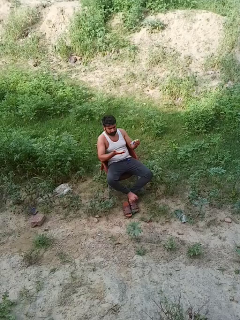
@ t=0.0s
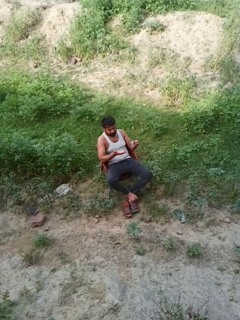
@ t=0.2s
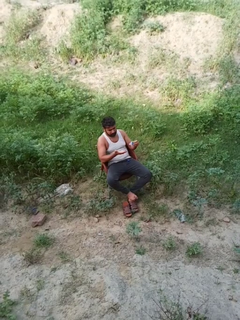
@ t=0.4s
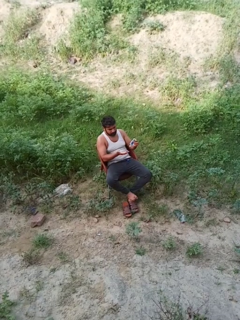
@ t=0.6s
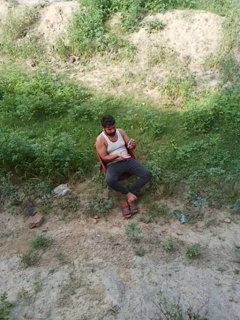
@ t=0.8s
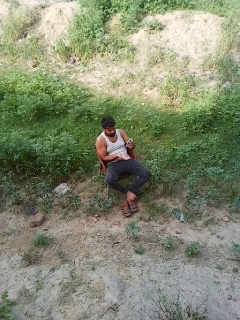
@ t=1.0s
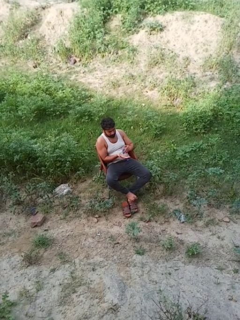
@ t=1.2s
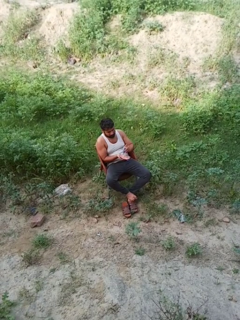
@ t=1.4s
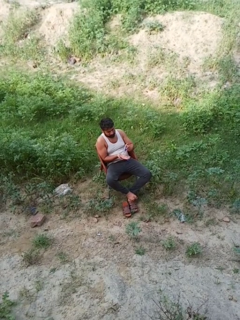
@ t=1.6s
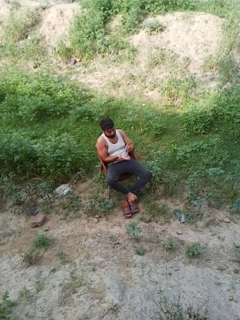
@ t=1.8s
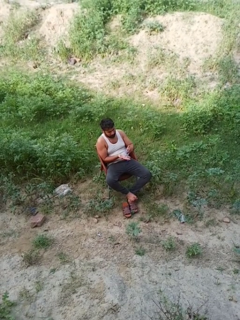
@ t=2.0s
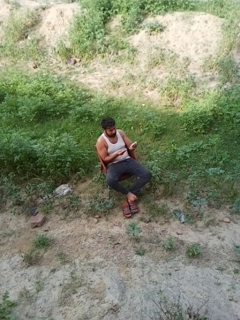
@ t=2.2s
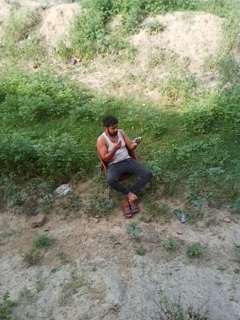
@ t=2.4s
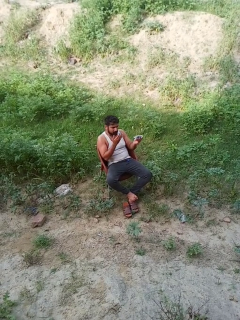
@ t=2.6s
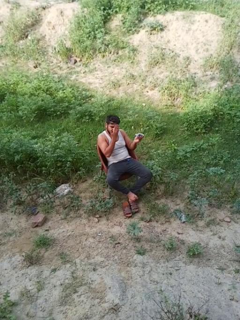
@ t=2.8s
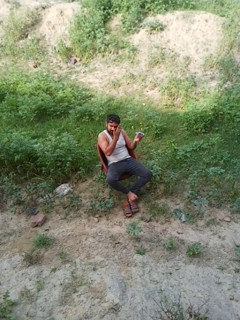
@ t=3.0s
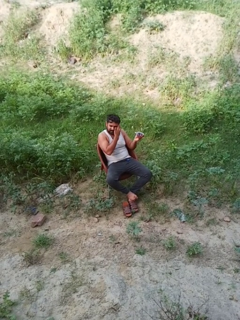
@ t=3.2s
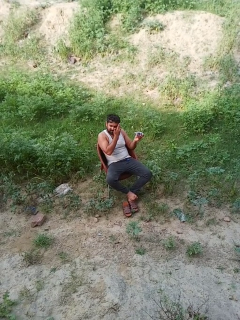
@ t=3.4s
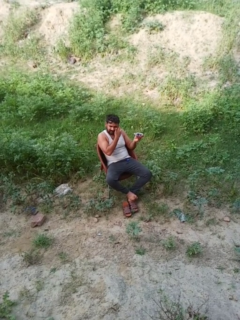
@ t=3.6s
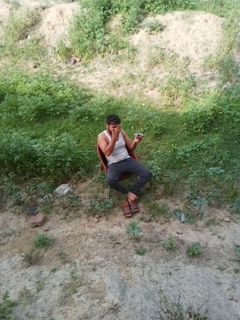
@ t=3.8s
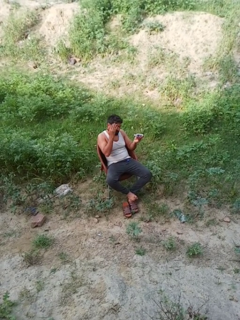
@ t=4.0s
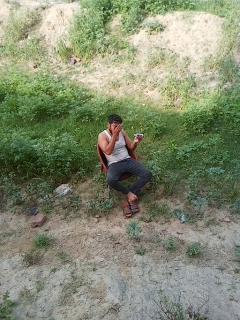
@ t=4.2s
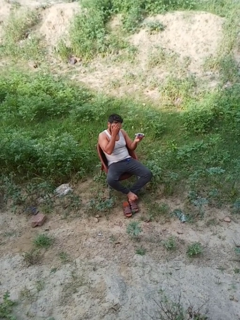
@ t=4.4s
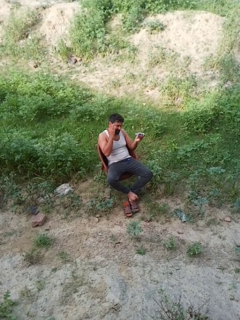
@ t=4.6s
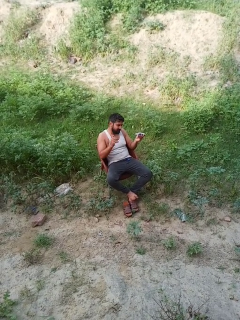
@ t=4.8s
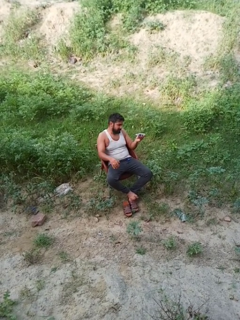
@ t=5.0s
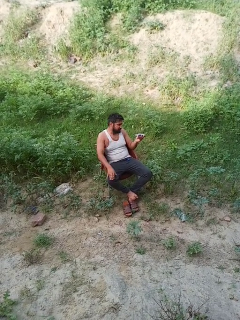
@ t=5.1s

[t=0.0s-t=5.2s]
person applies sunscreen

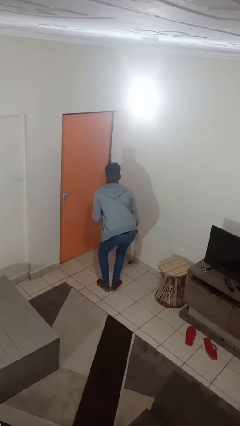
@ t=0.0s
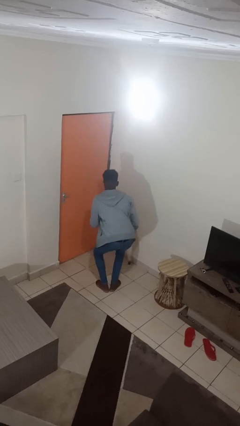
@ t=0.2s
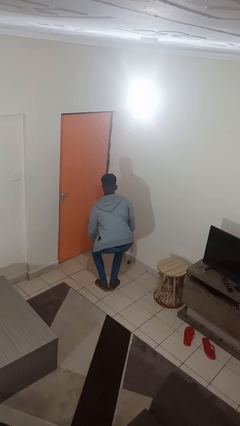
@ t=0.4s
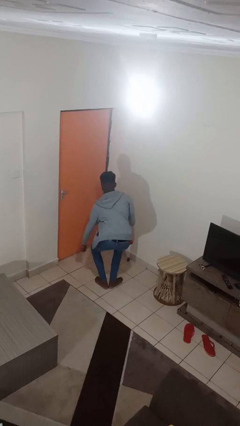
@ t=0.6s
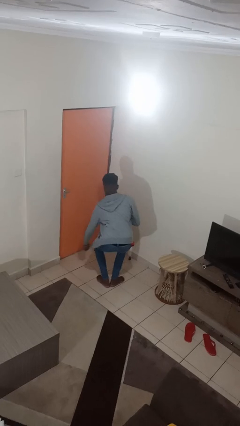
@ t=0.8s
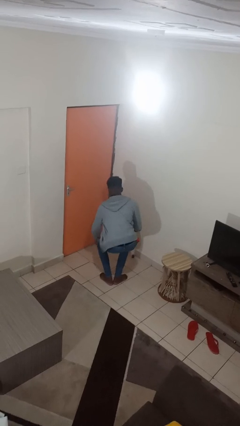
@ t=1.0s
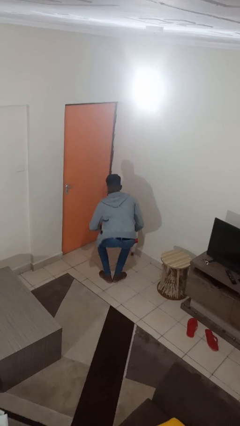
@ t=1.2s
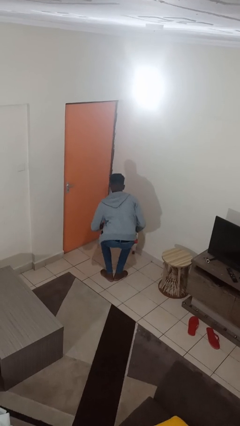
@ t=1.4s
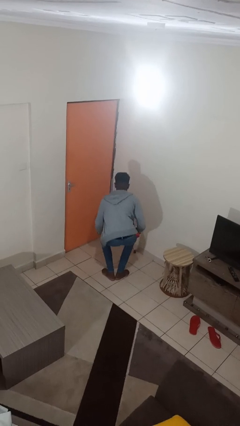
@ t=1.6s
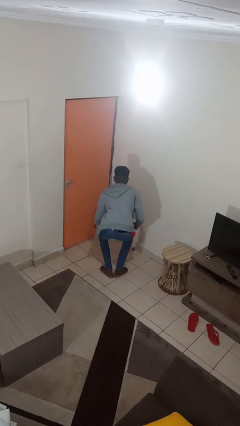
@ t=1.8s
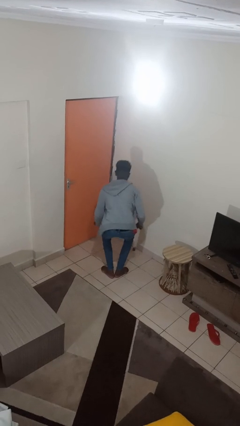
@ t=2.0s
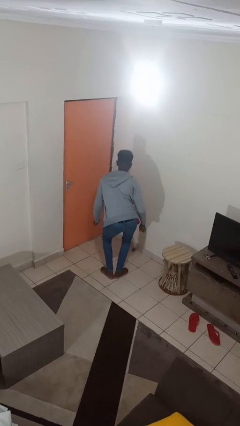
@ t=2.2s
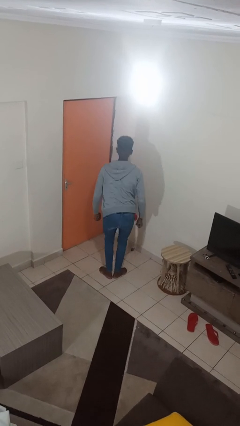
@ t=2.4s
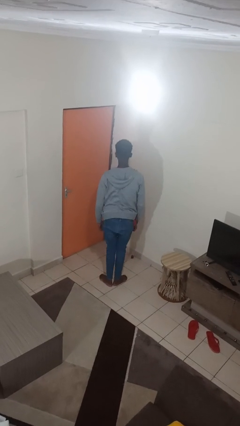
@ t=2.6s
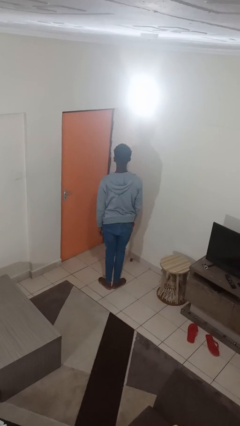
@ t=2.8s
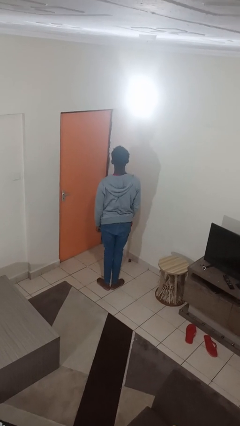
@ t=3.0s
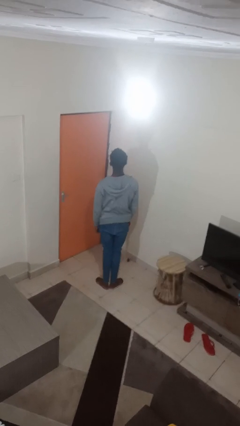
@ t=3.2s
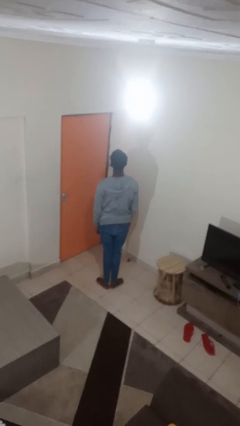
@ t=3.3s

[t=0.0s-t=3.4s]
person dances in place

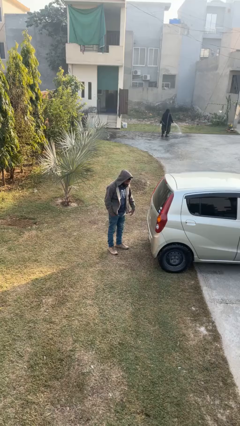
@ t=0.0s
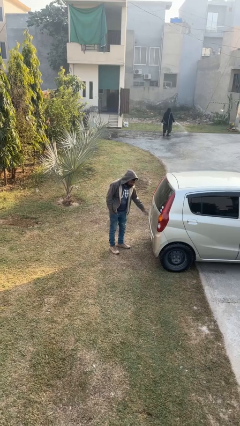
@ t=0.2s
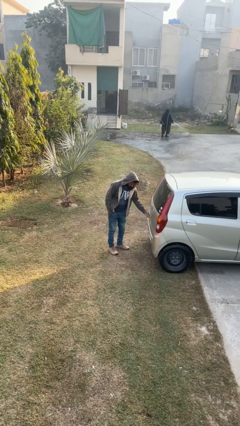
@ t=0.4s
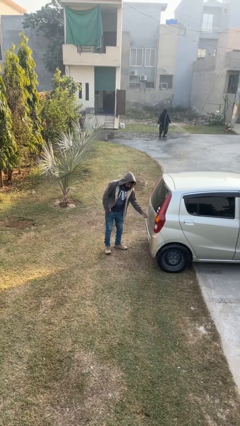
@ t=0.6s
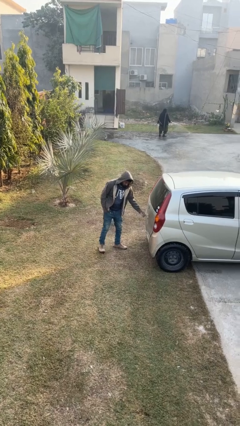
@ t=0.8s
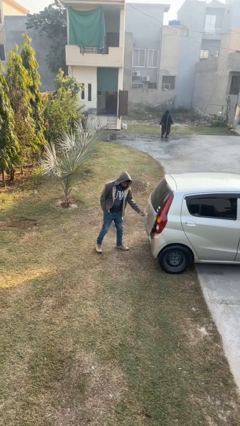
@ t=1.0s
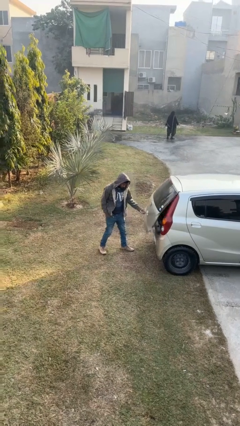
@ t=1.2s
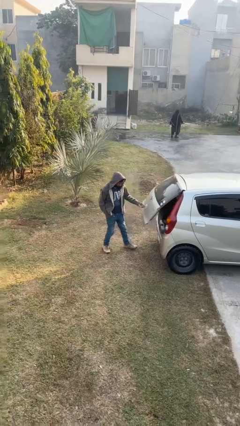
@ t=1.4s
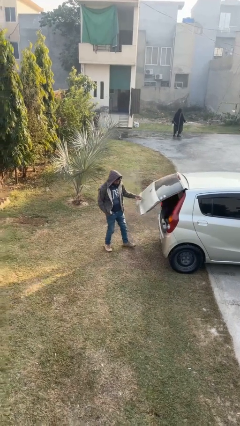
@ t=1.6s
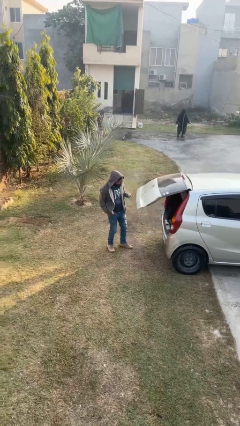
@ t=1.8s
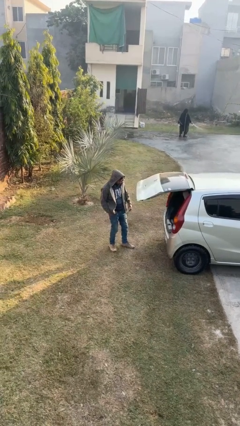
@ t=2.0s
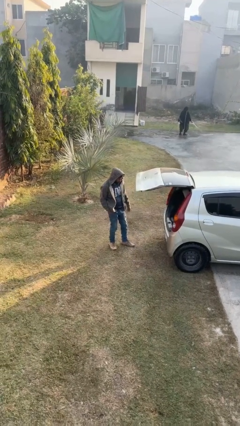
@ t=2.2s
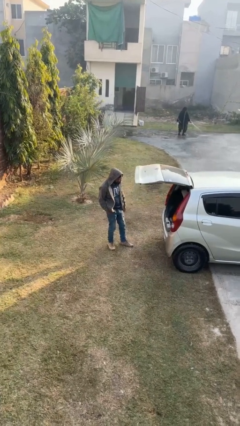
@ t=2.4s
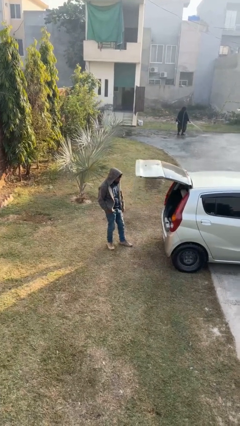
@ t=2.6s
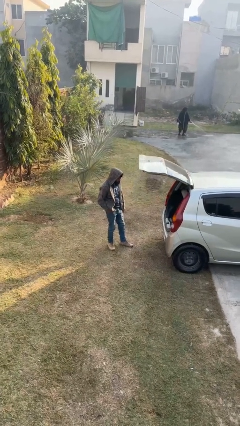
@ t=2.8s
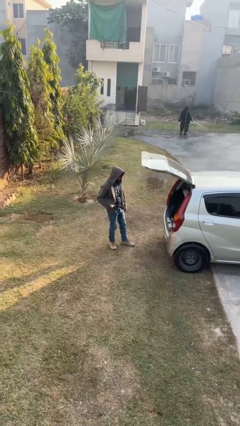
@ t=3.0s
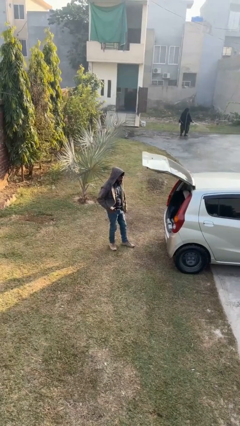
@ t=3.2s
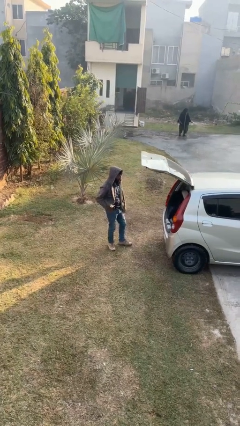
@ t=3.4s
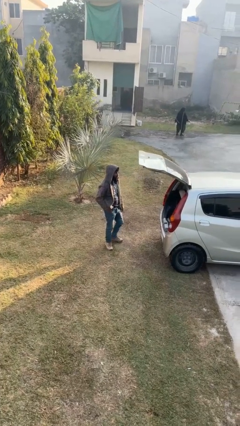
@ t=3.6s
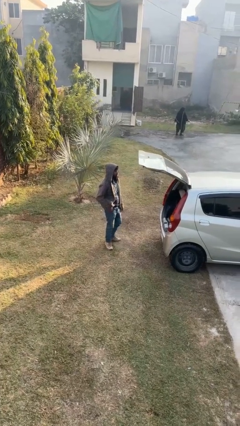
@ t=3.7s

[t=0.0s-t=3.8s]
person opens car trunk

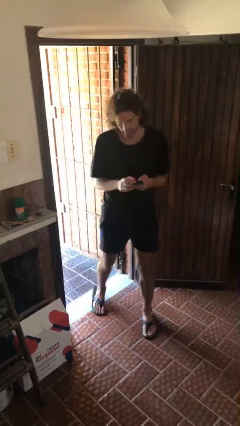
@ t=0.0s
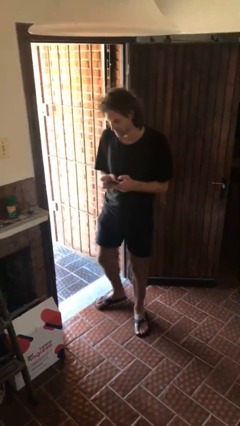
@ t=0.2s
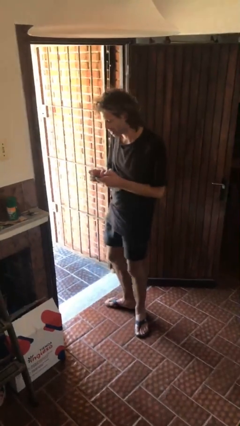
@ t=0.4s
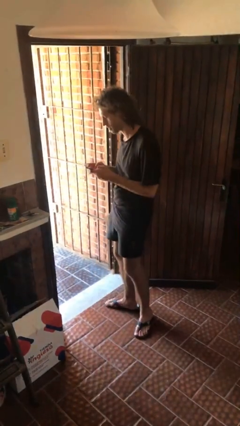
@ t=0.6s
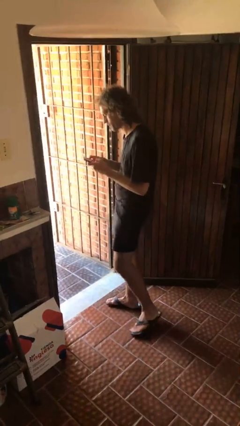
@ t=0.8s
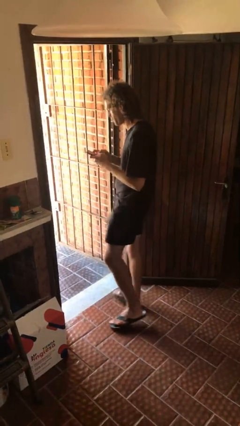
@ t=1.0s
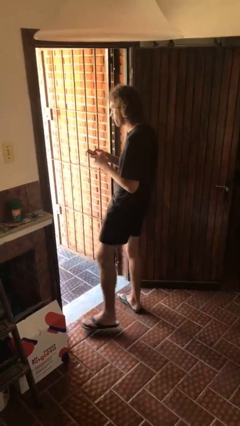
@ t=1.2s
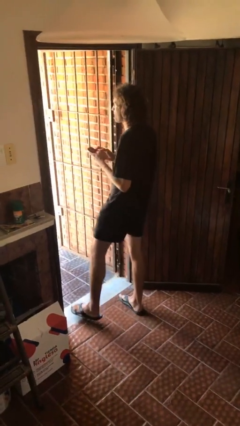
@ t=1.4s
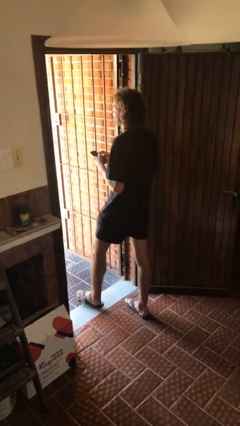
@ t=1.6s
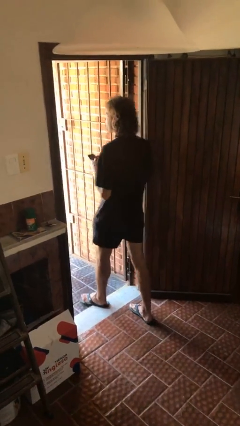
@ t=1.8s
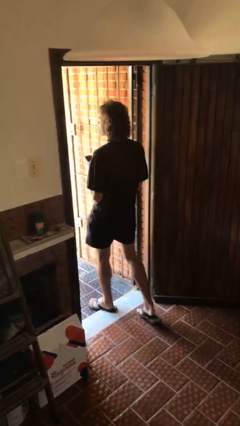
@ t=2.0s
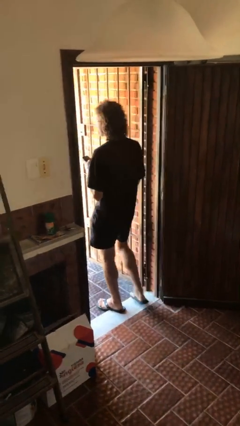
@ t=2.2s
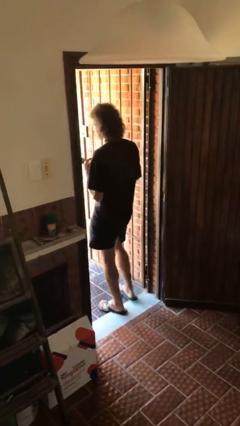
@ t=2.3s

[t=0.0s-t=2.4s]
person exits scene through structure

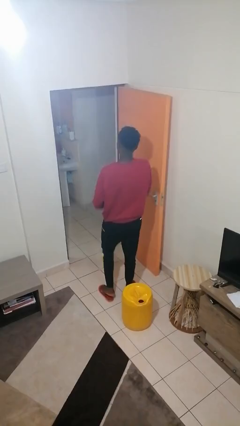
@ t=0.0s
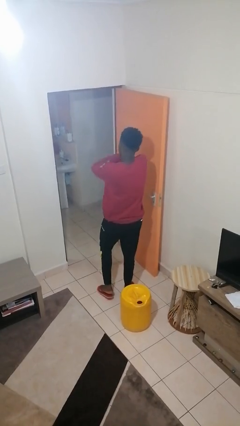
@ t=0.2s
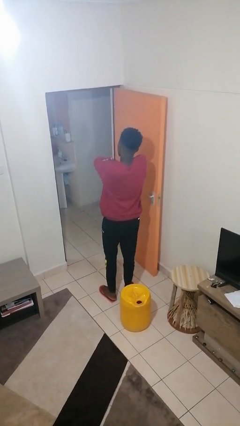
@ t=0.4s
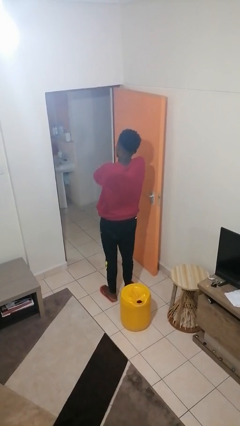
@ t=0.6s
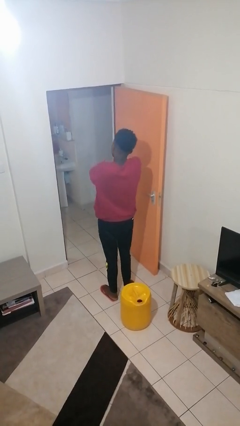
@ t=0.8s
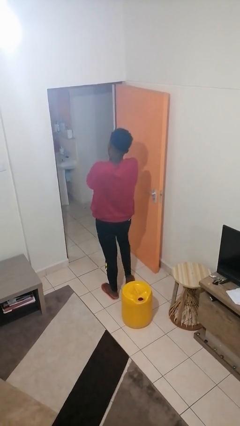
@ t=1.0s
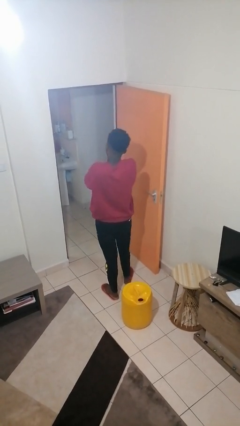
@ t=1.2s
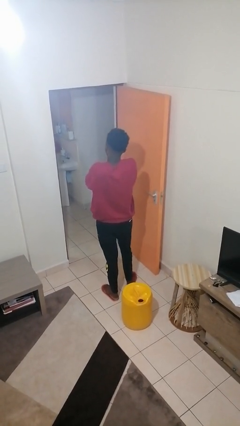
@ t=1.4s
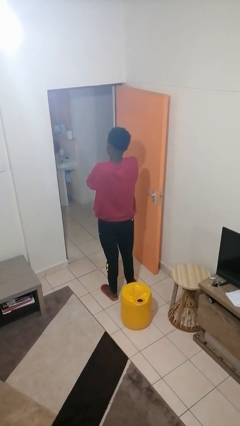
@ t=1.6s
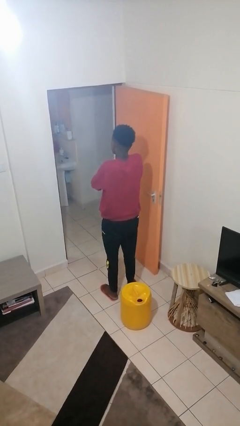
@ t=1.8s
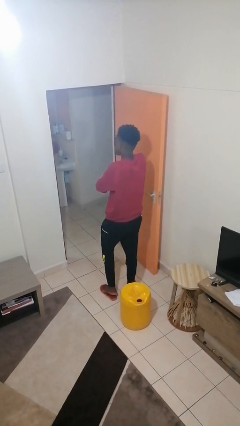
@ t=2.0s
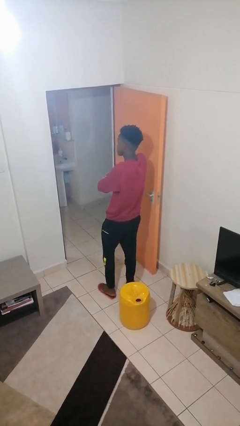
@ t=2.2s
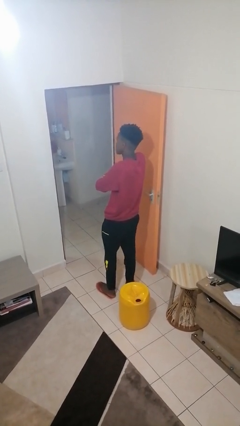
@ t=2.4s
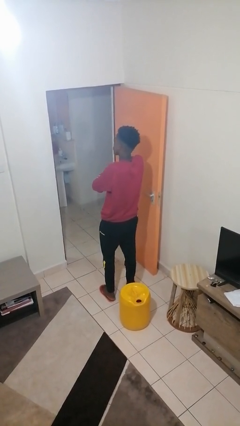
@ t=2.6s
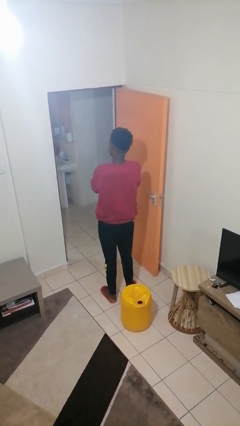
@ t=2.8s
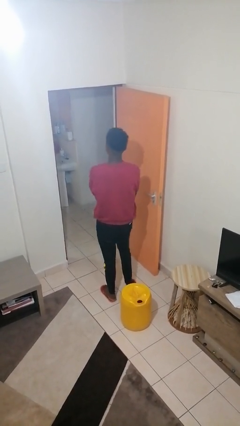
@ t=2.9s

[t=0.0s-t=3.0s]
person crosses arms

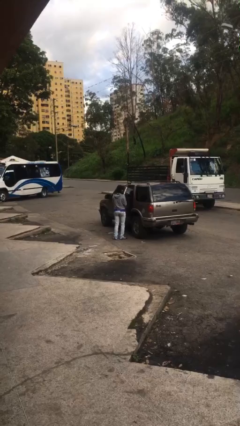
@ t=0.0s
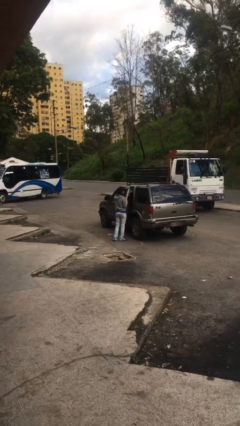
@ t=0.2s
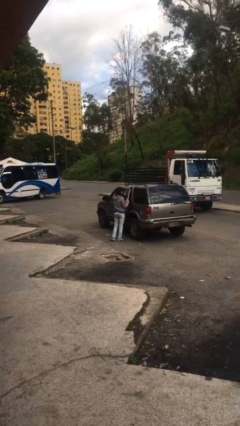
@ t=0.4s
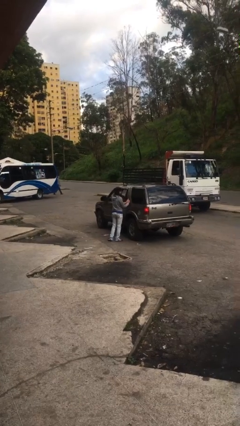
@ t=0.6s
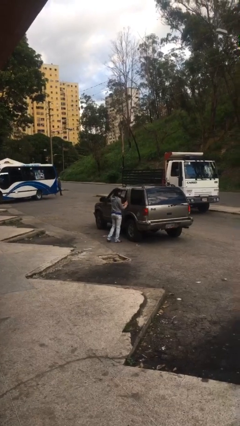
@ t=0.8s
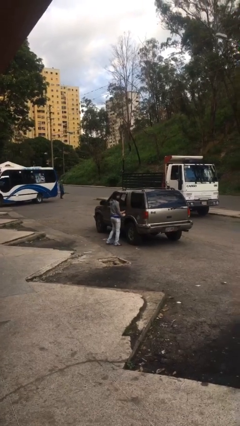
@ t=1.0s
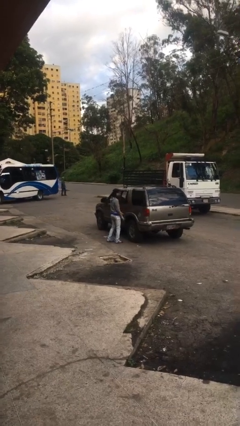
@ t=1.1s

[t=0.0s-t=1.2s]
person closes car door
